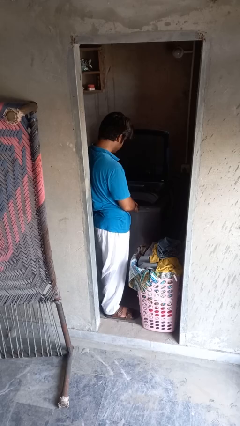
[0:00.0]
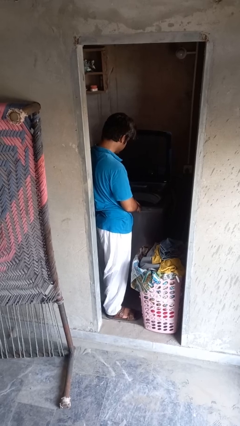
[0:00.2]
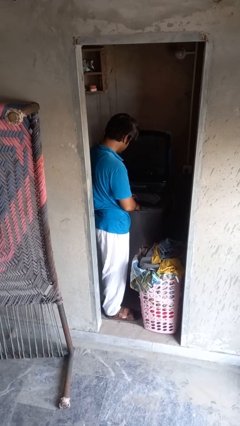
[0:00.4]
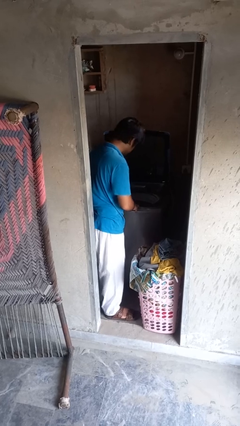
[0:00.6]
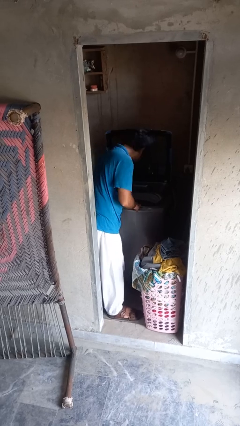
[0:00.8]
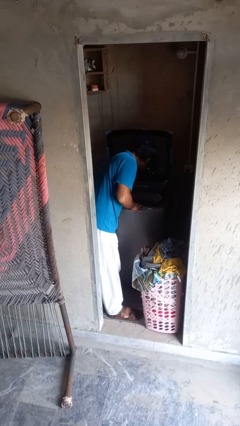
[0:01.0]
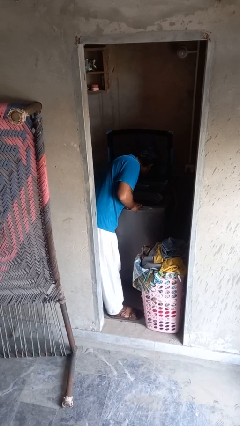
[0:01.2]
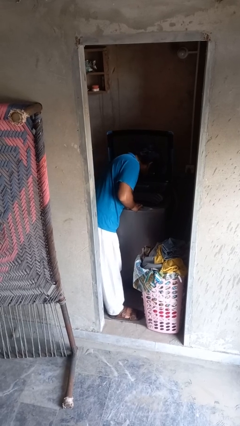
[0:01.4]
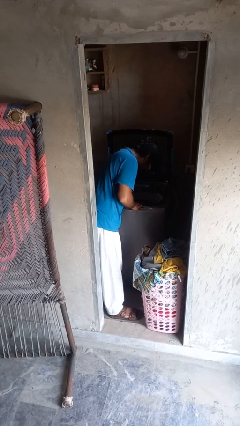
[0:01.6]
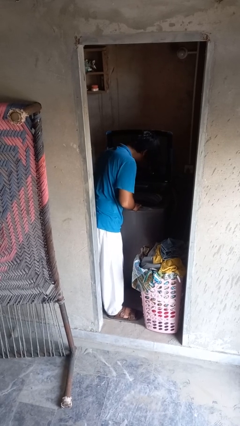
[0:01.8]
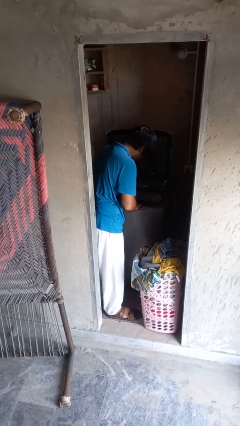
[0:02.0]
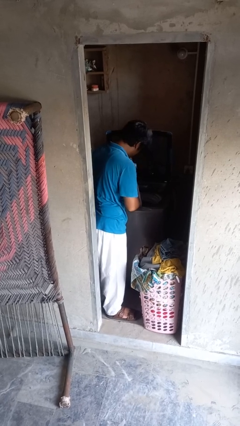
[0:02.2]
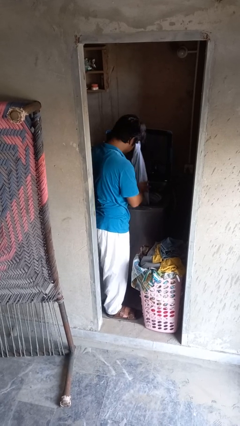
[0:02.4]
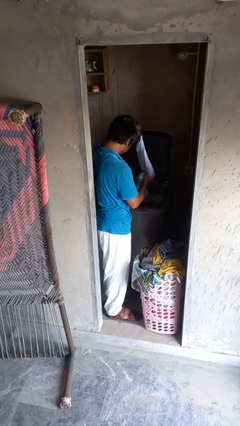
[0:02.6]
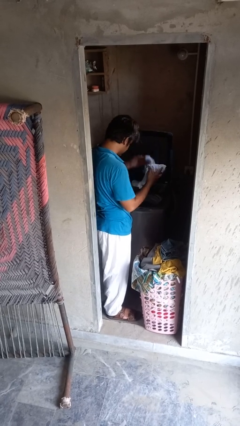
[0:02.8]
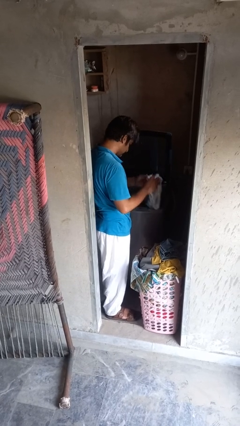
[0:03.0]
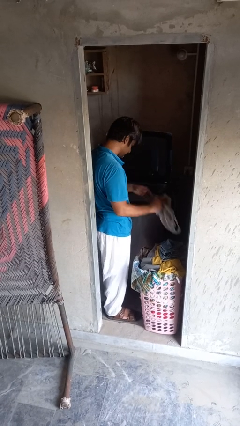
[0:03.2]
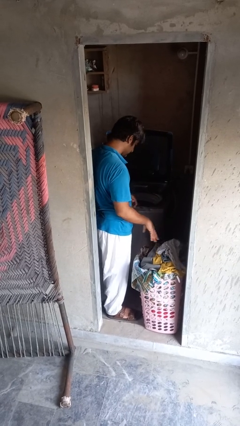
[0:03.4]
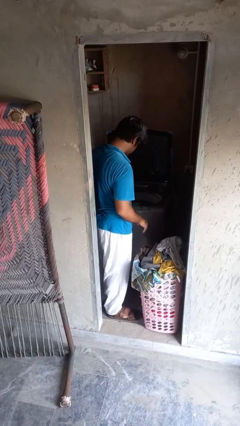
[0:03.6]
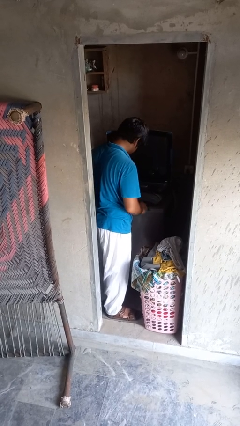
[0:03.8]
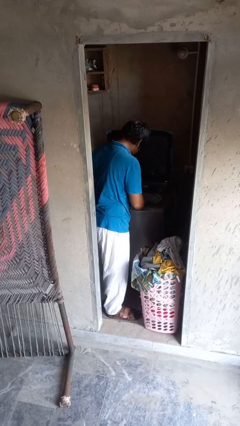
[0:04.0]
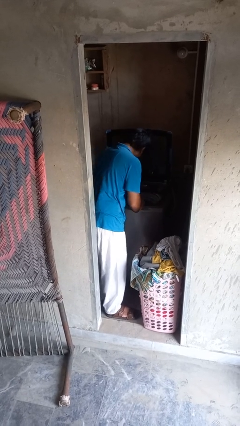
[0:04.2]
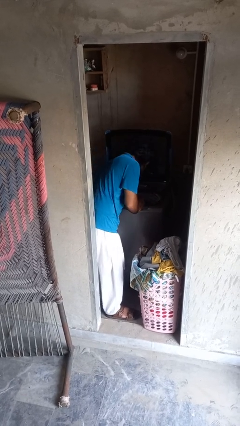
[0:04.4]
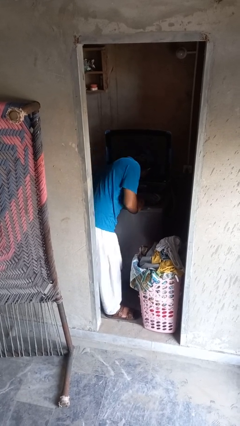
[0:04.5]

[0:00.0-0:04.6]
person loads clotheswasher

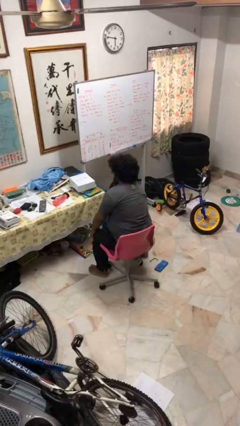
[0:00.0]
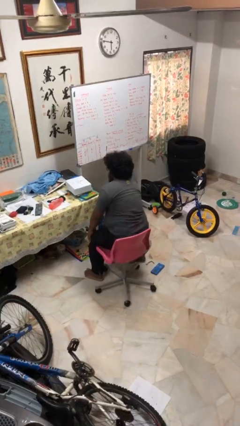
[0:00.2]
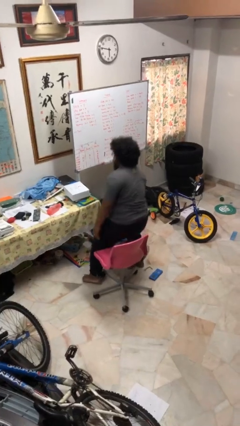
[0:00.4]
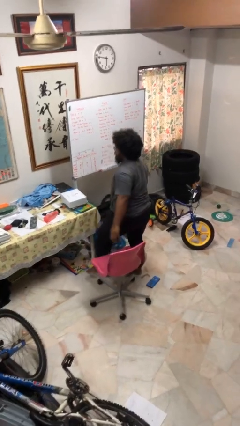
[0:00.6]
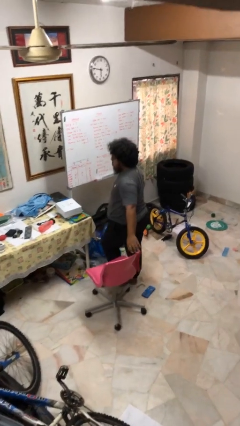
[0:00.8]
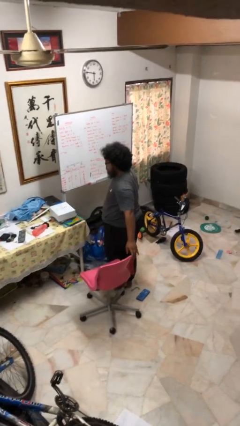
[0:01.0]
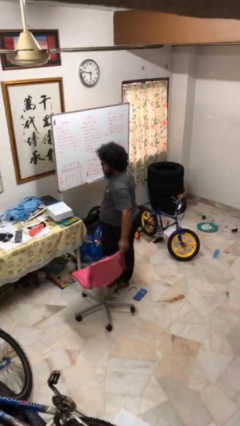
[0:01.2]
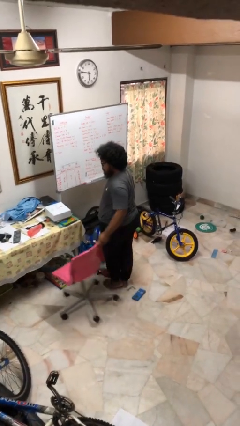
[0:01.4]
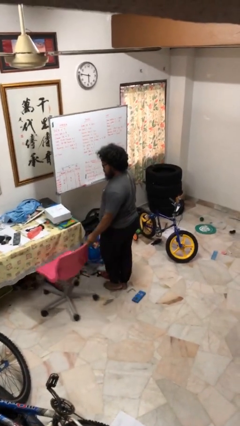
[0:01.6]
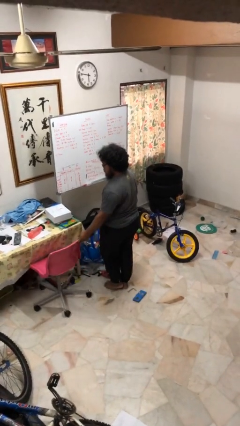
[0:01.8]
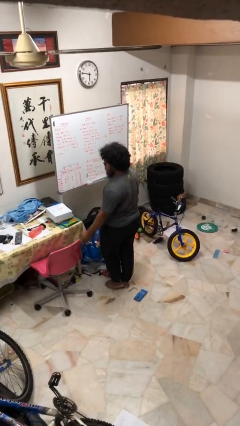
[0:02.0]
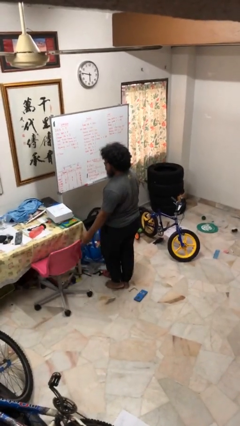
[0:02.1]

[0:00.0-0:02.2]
person stands up

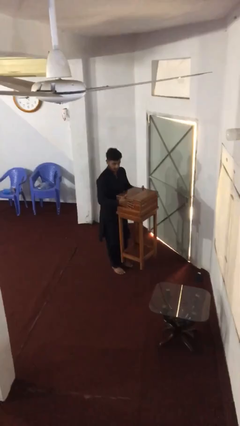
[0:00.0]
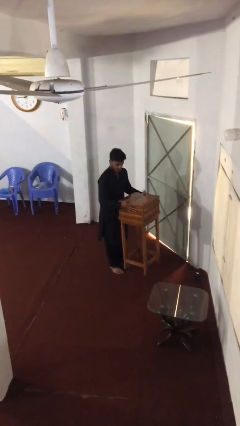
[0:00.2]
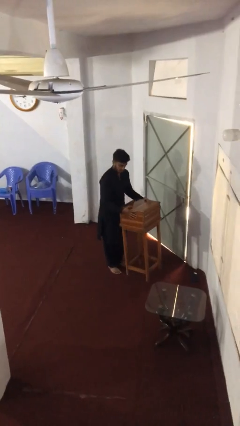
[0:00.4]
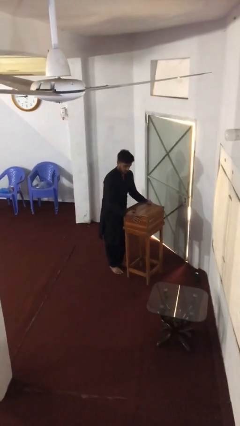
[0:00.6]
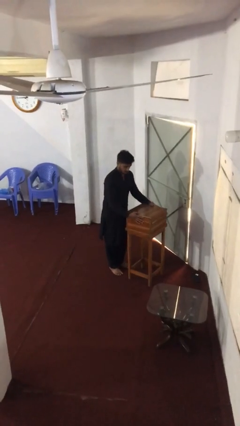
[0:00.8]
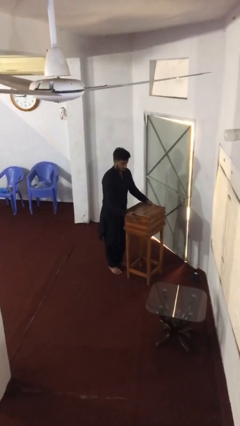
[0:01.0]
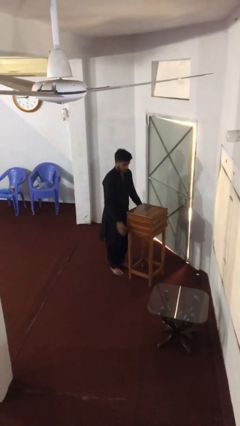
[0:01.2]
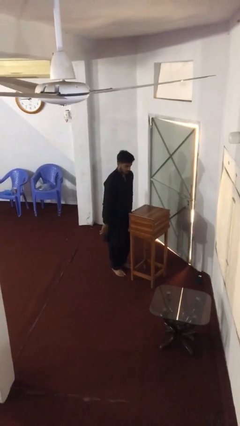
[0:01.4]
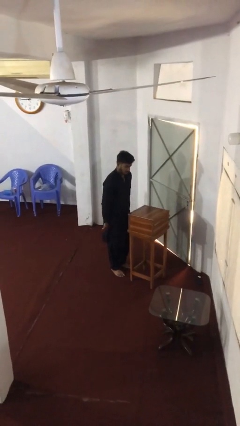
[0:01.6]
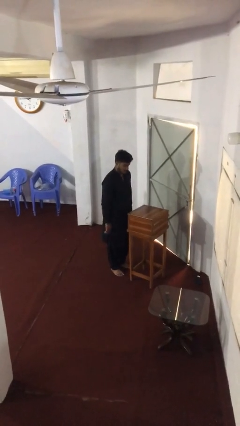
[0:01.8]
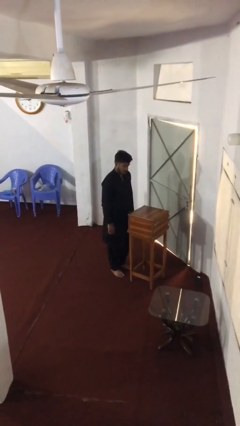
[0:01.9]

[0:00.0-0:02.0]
person puts down object on floor

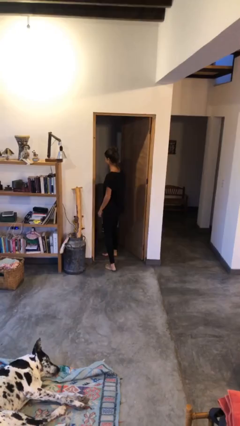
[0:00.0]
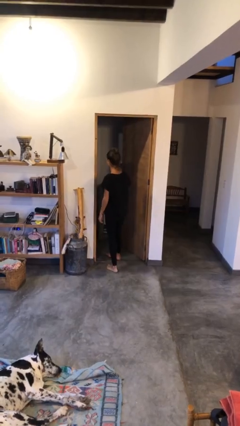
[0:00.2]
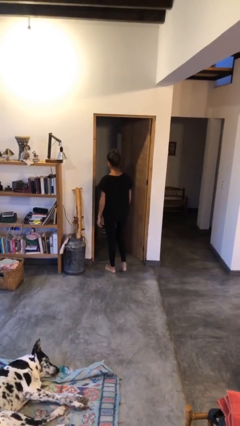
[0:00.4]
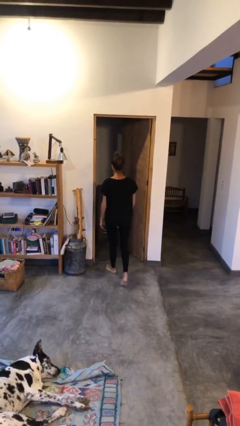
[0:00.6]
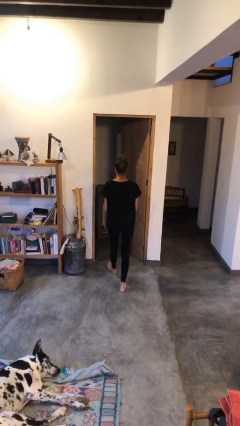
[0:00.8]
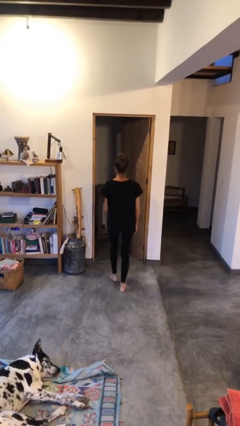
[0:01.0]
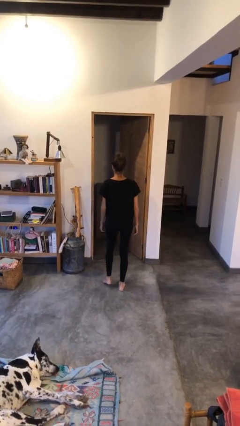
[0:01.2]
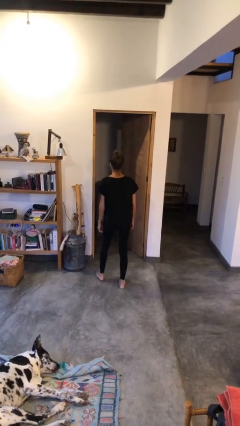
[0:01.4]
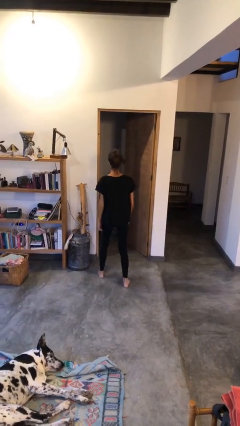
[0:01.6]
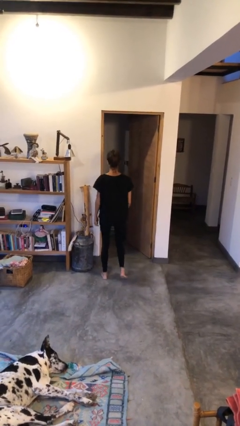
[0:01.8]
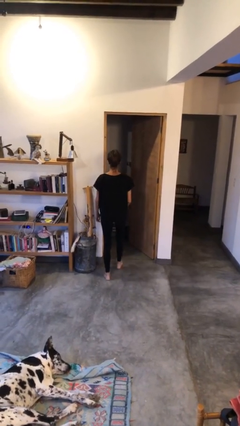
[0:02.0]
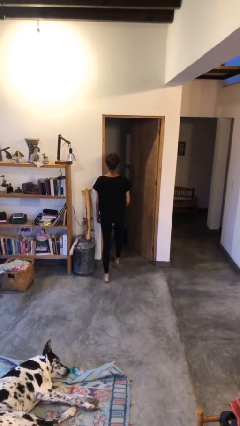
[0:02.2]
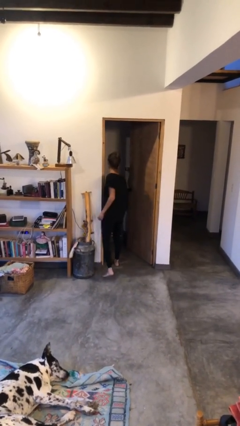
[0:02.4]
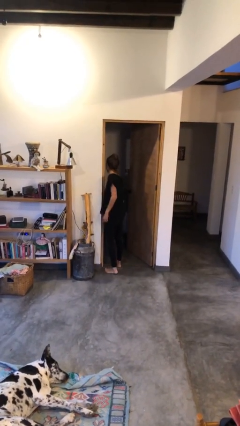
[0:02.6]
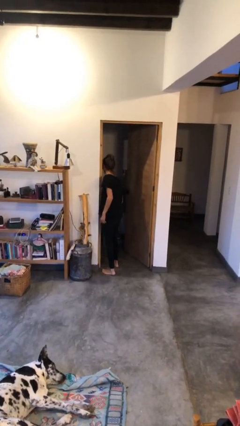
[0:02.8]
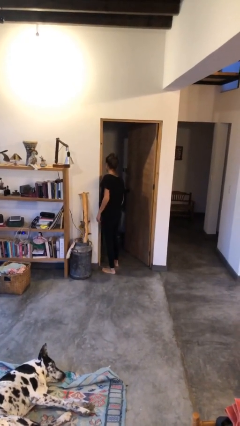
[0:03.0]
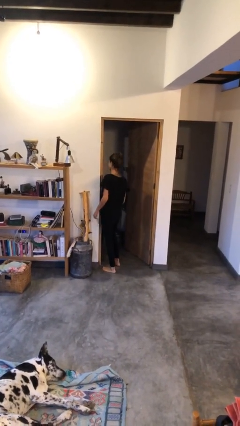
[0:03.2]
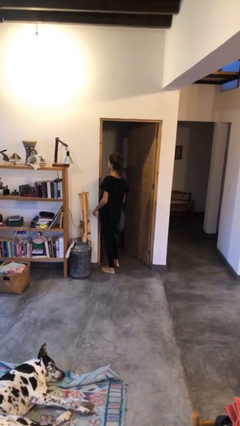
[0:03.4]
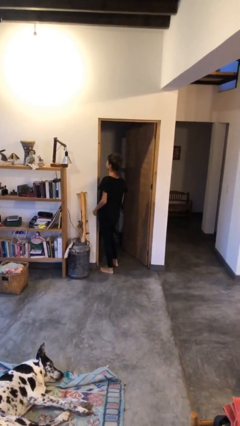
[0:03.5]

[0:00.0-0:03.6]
person bumps into wall

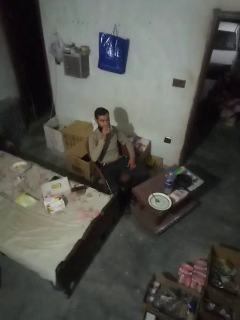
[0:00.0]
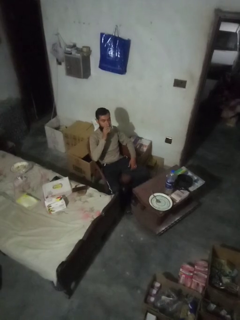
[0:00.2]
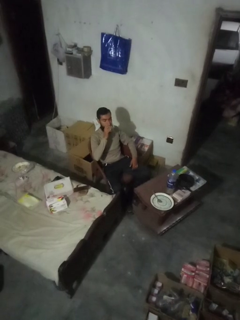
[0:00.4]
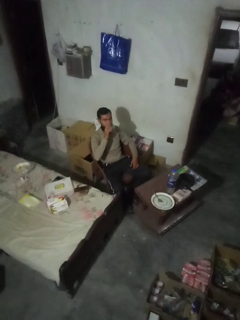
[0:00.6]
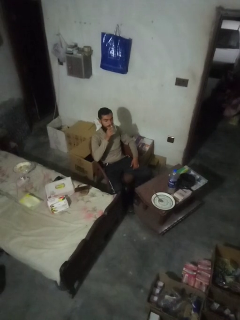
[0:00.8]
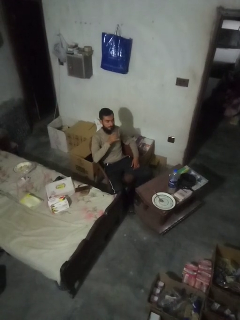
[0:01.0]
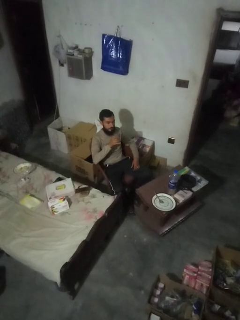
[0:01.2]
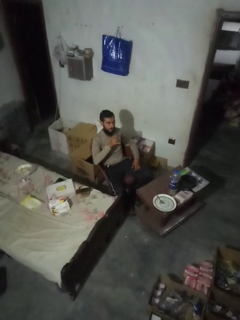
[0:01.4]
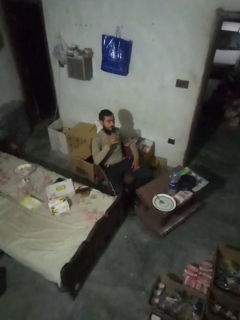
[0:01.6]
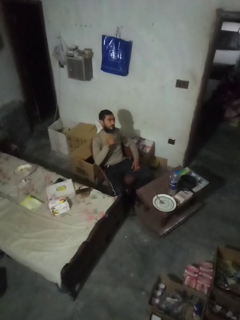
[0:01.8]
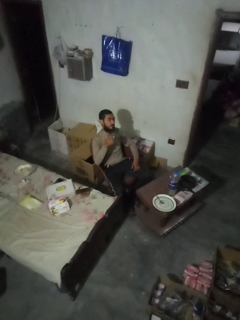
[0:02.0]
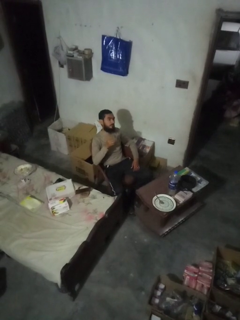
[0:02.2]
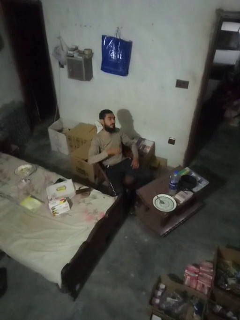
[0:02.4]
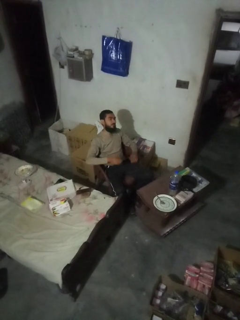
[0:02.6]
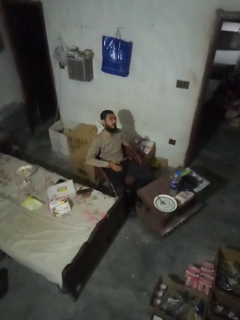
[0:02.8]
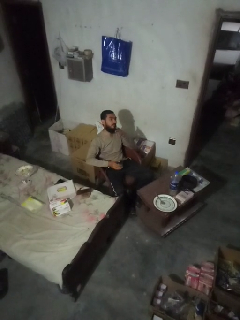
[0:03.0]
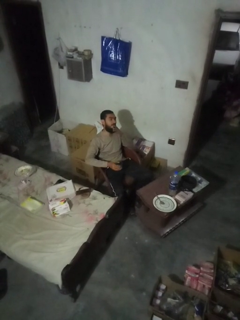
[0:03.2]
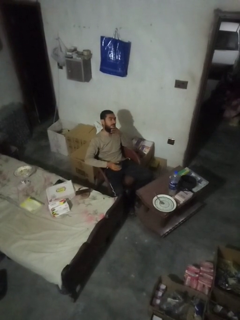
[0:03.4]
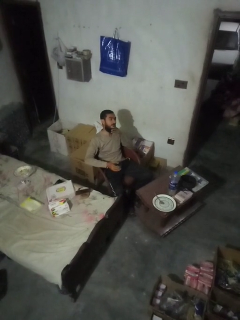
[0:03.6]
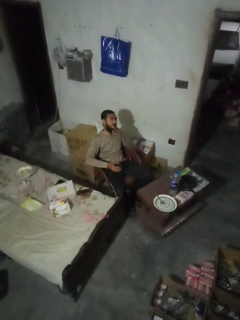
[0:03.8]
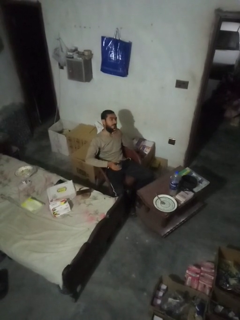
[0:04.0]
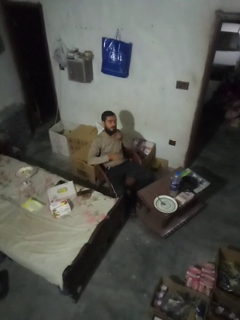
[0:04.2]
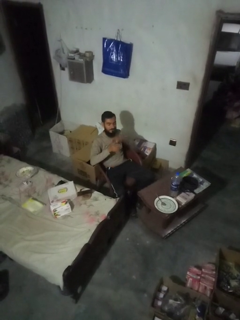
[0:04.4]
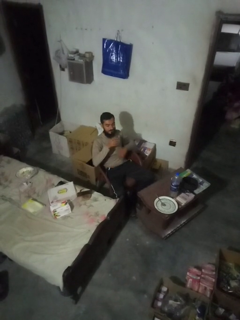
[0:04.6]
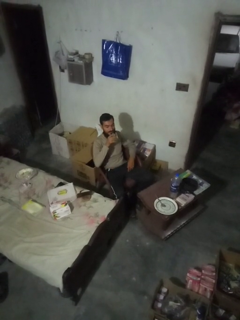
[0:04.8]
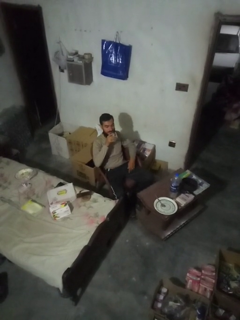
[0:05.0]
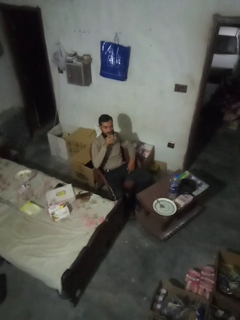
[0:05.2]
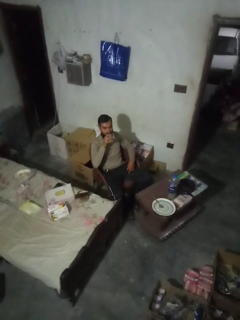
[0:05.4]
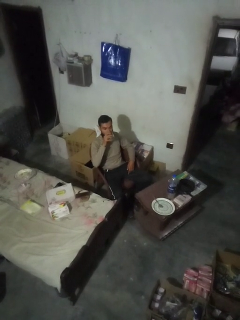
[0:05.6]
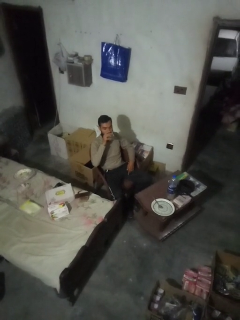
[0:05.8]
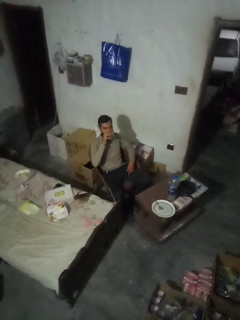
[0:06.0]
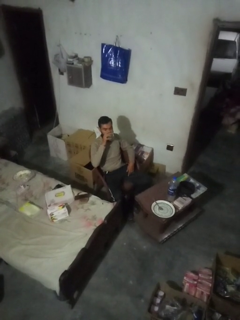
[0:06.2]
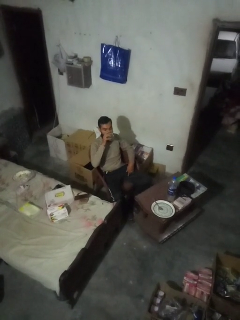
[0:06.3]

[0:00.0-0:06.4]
person drinks from shotglass

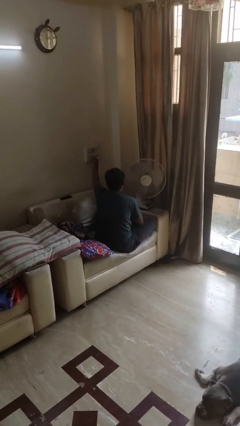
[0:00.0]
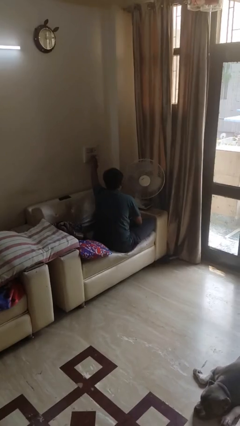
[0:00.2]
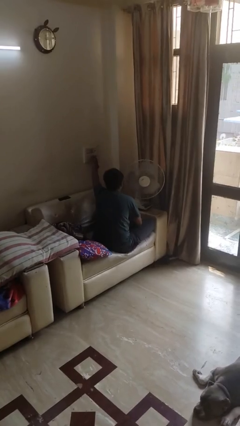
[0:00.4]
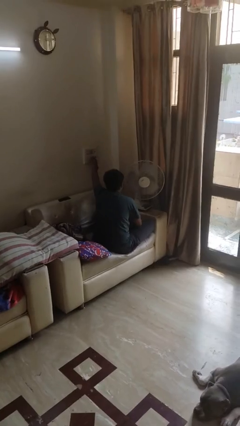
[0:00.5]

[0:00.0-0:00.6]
person turns off fan
